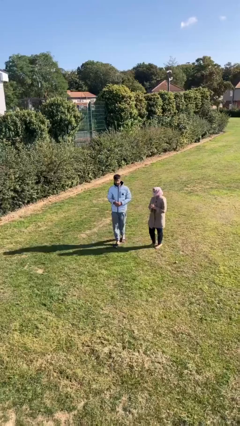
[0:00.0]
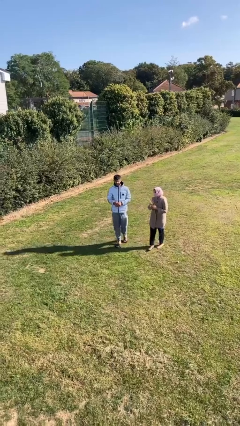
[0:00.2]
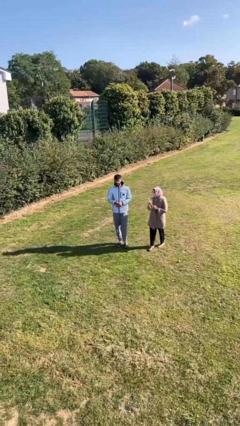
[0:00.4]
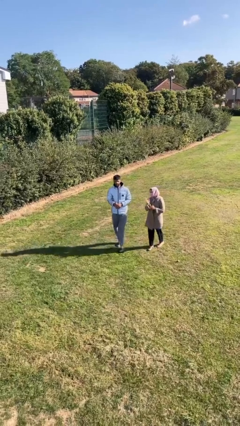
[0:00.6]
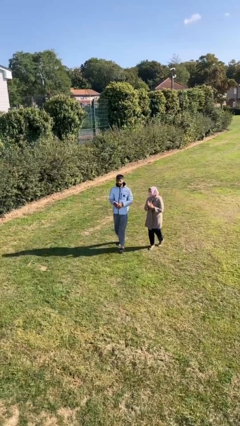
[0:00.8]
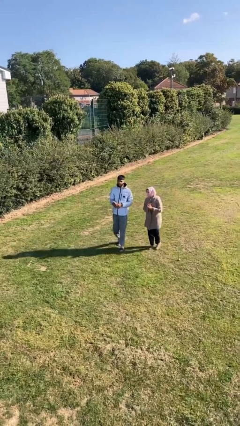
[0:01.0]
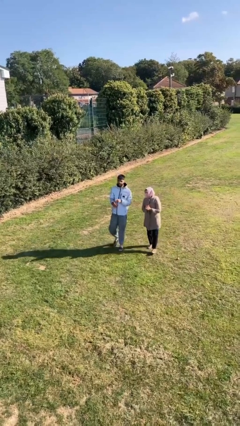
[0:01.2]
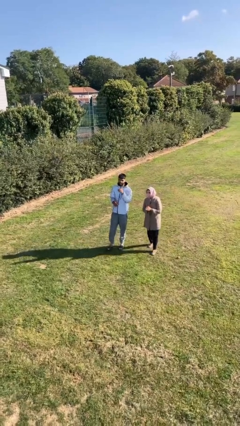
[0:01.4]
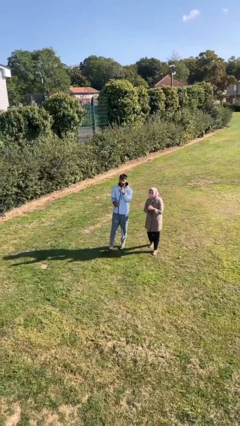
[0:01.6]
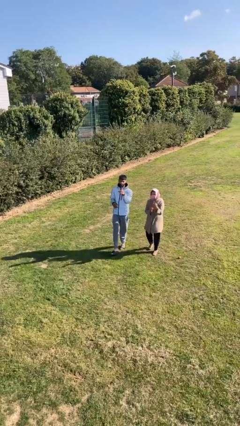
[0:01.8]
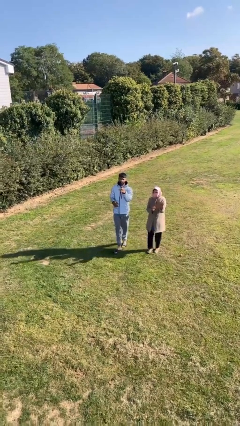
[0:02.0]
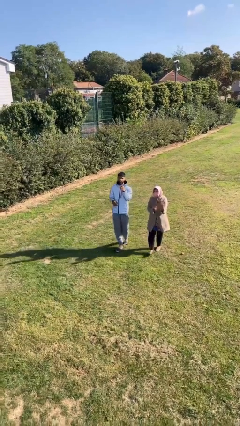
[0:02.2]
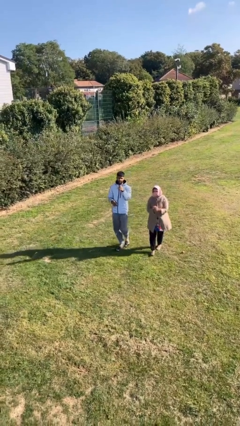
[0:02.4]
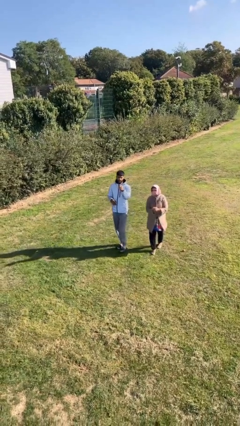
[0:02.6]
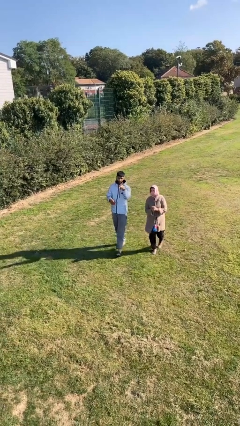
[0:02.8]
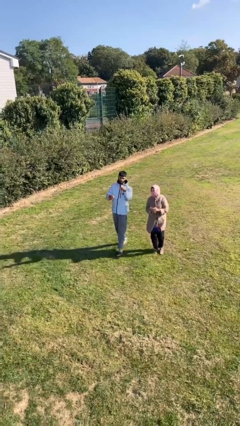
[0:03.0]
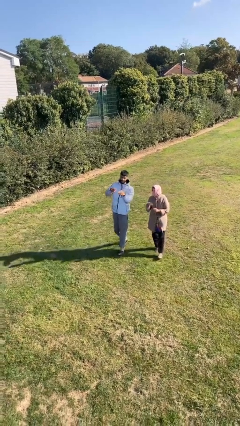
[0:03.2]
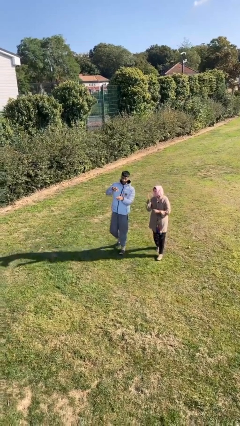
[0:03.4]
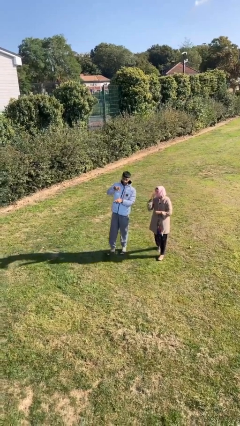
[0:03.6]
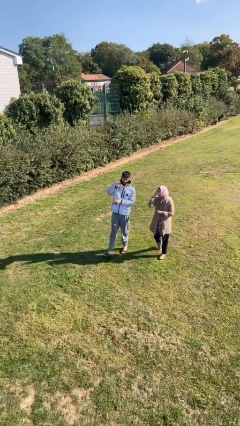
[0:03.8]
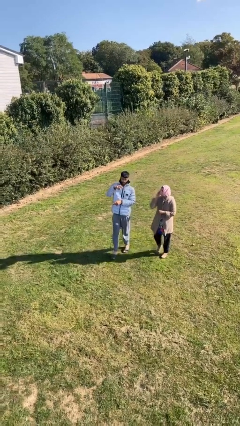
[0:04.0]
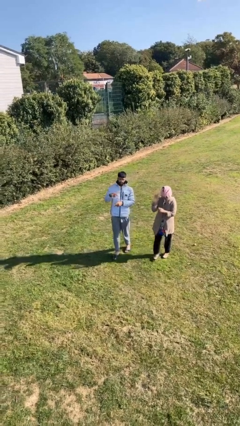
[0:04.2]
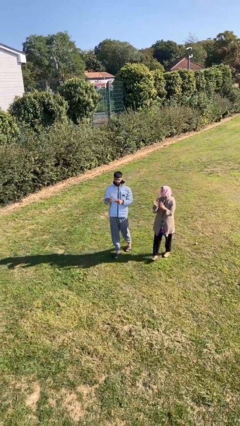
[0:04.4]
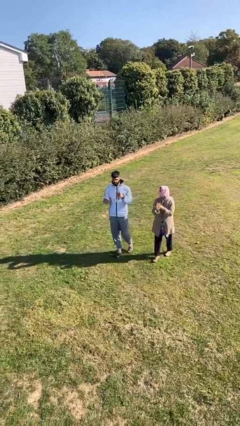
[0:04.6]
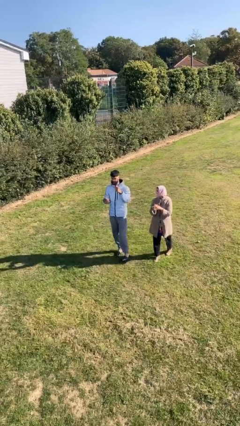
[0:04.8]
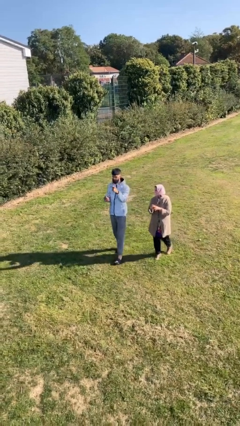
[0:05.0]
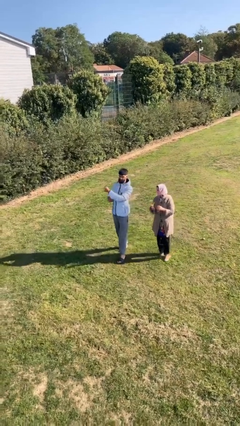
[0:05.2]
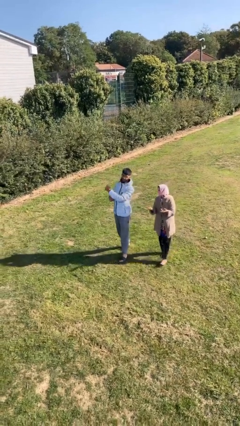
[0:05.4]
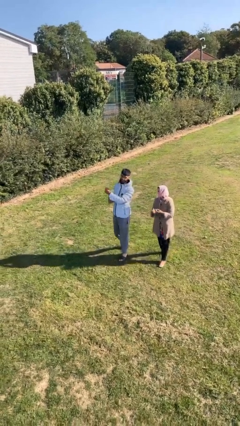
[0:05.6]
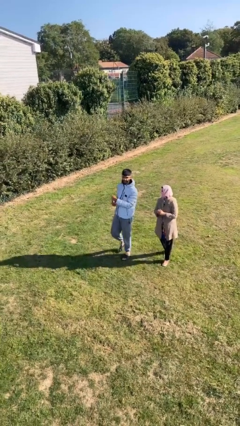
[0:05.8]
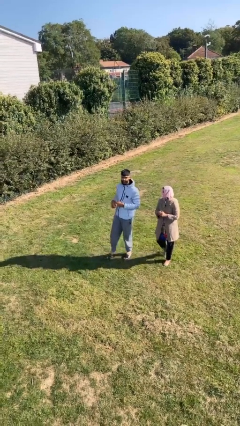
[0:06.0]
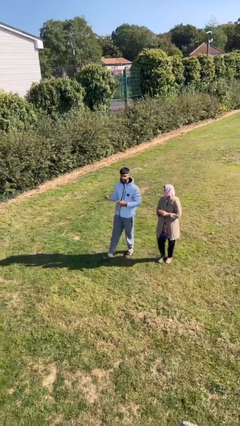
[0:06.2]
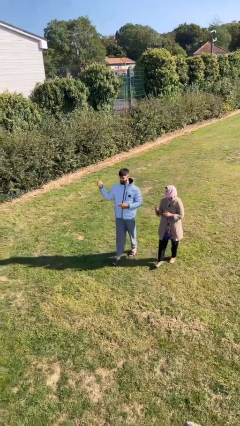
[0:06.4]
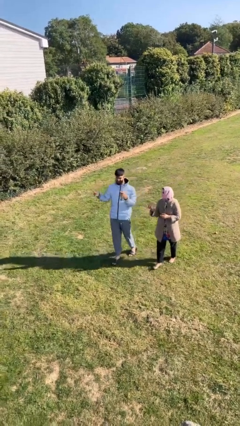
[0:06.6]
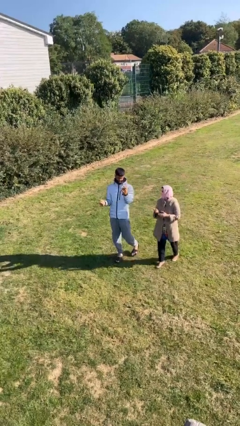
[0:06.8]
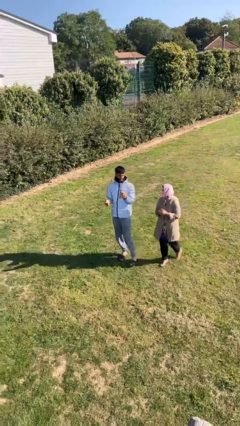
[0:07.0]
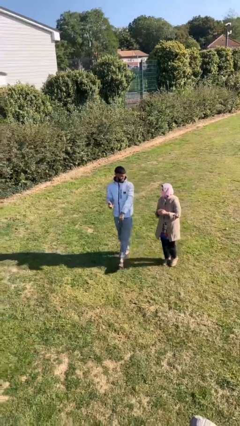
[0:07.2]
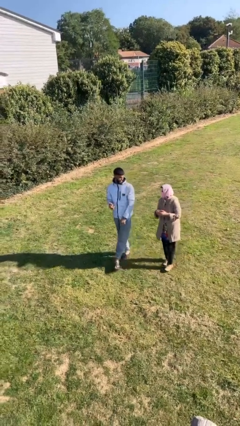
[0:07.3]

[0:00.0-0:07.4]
person talks to person

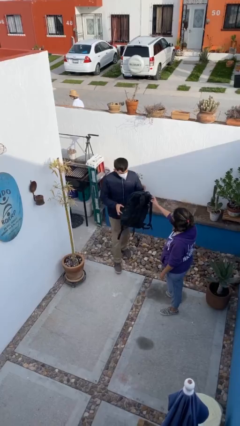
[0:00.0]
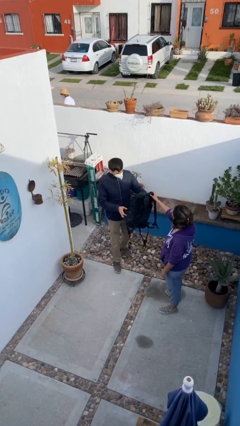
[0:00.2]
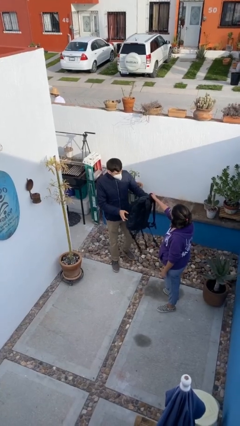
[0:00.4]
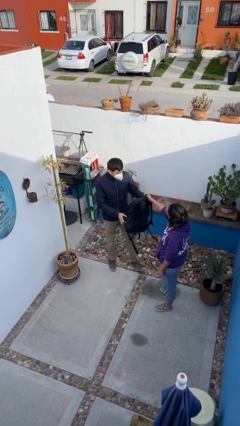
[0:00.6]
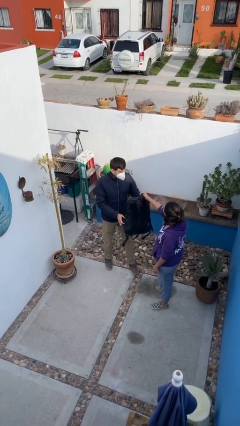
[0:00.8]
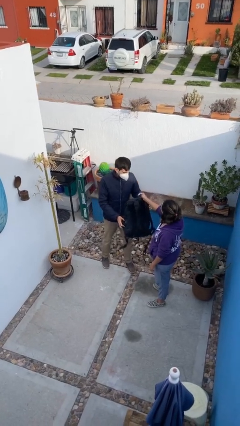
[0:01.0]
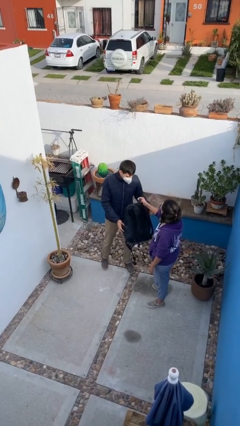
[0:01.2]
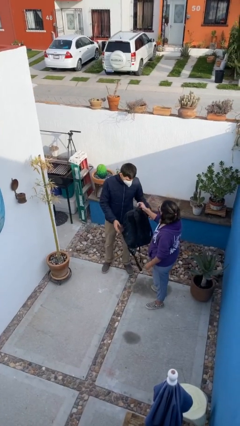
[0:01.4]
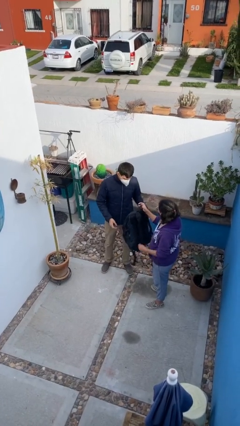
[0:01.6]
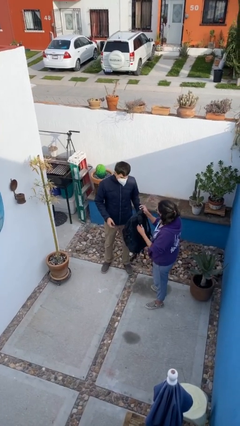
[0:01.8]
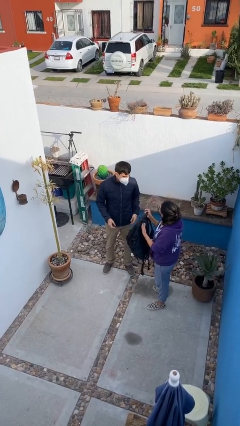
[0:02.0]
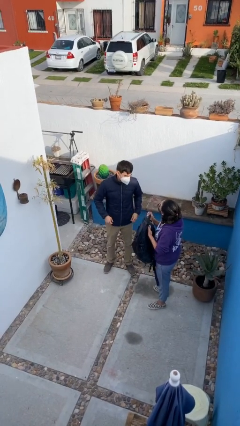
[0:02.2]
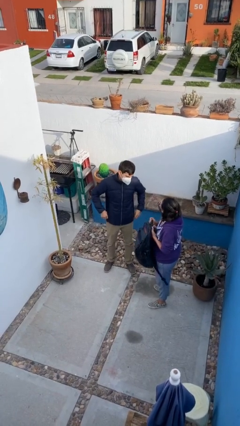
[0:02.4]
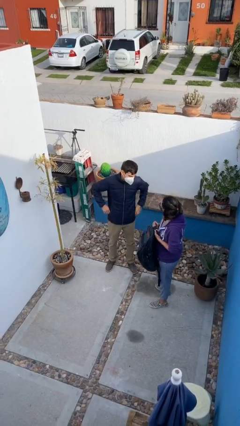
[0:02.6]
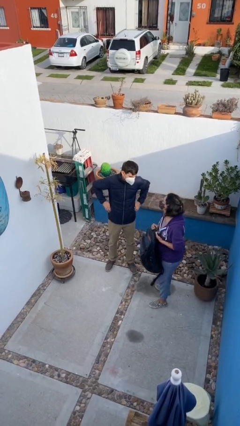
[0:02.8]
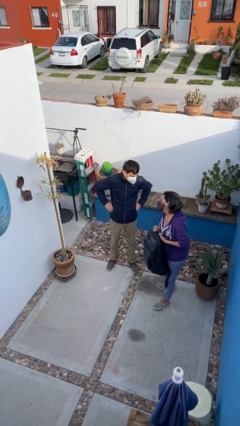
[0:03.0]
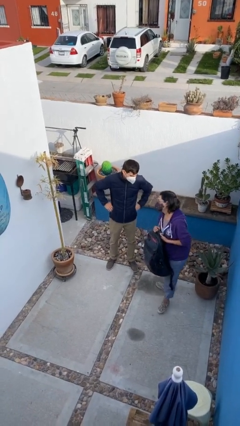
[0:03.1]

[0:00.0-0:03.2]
person transfers object to person

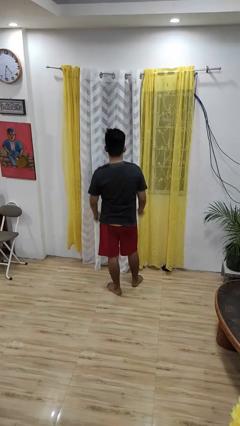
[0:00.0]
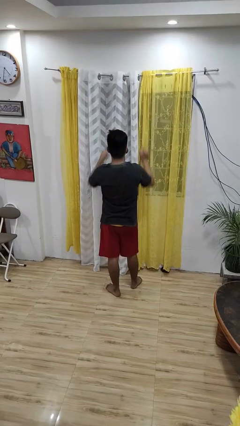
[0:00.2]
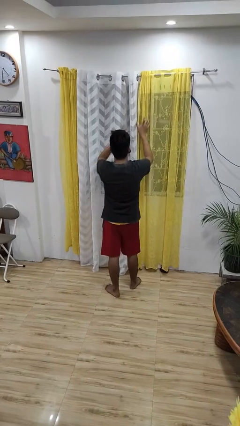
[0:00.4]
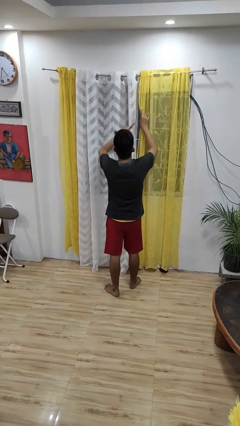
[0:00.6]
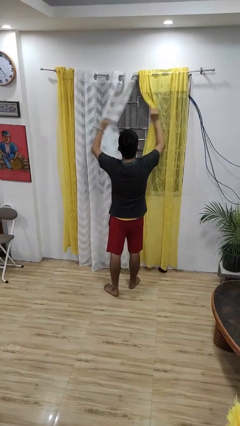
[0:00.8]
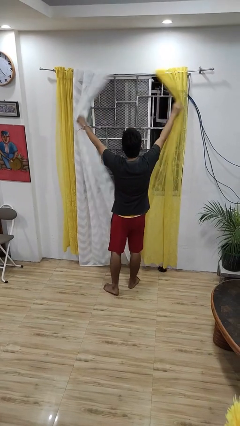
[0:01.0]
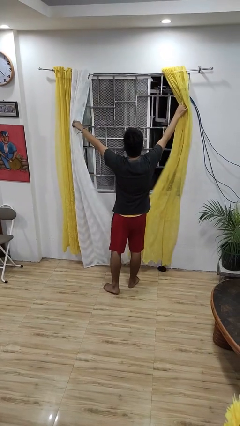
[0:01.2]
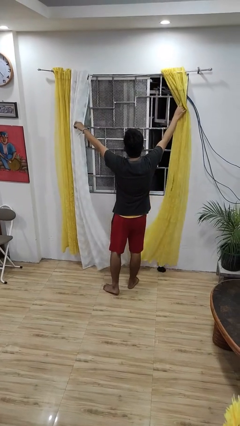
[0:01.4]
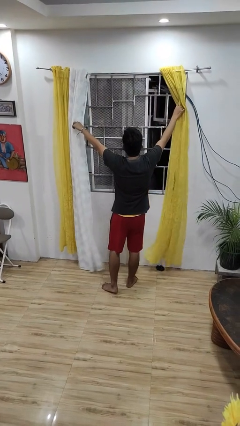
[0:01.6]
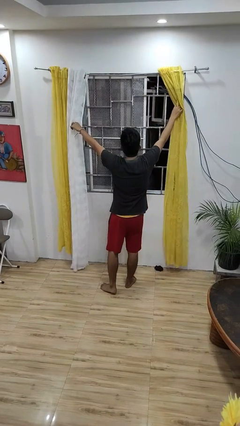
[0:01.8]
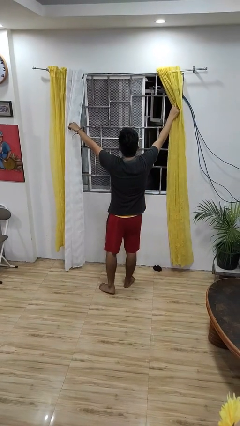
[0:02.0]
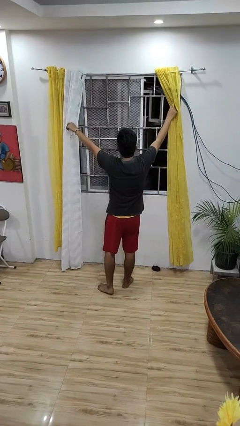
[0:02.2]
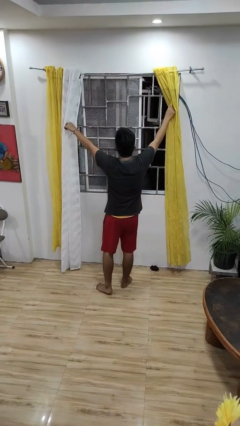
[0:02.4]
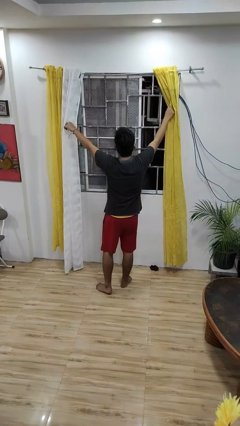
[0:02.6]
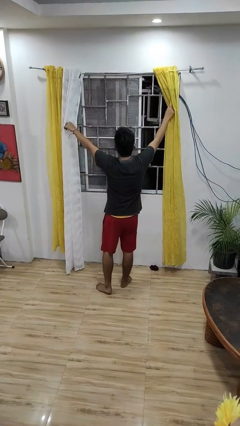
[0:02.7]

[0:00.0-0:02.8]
person opens curtains

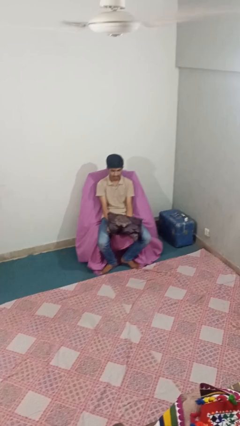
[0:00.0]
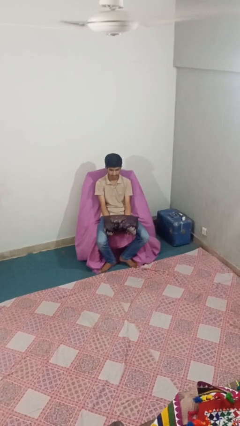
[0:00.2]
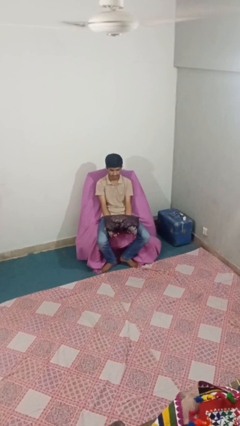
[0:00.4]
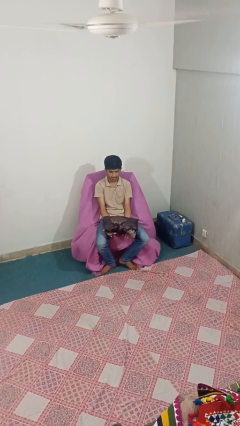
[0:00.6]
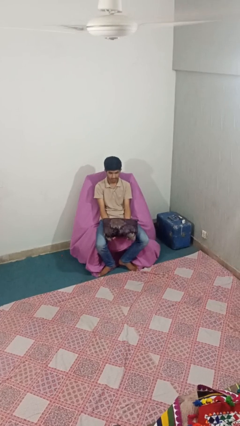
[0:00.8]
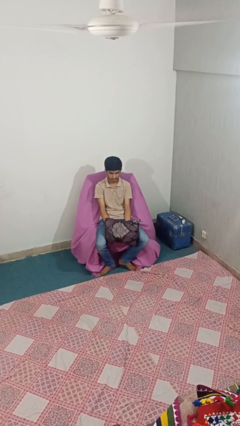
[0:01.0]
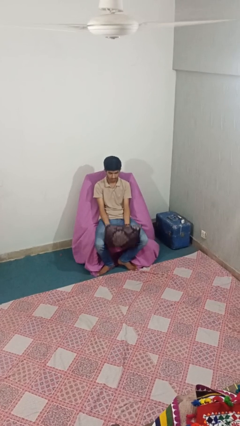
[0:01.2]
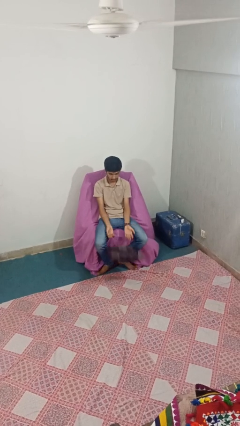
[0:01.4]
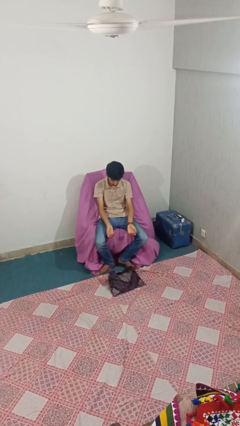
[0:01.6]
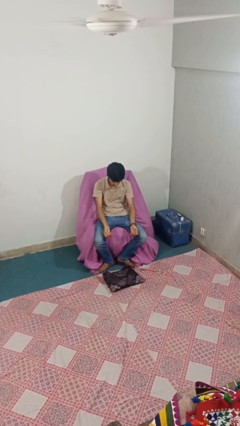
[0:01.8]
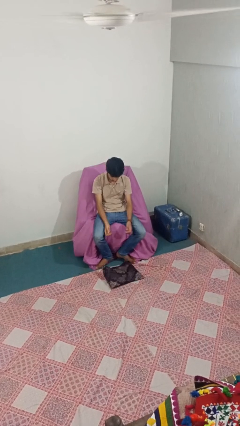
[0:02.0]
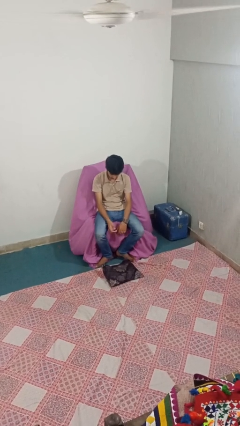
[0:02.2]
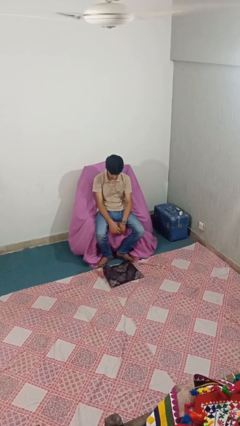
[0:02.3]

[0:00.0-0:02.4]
person drops object

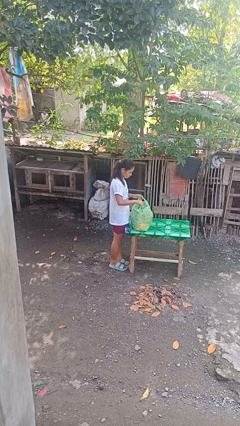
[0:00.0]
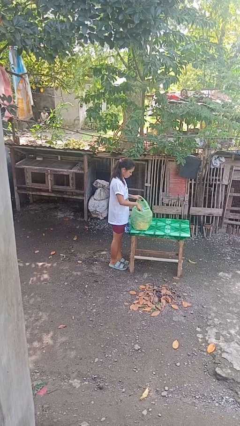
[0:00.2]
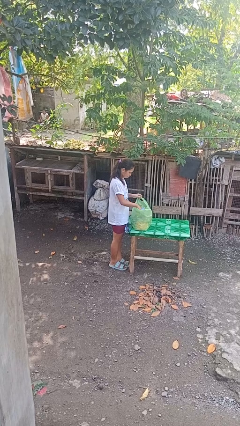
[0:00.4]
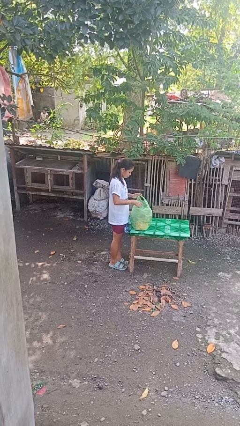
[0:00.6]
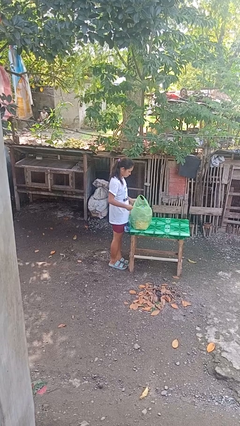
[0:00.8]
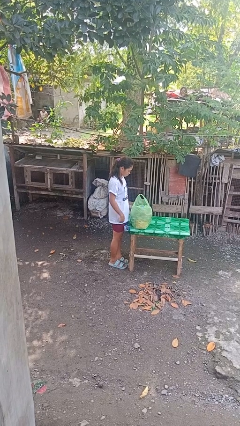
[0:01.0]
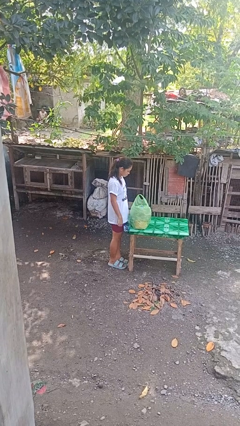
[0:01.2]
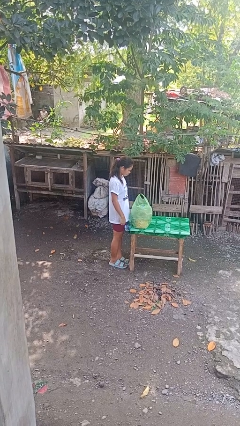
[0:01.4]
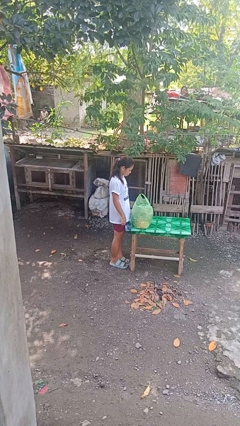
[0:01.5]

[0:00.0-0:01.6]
person puts object into bag
